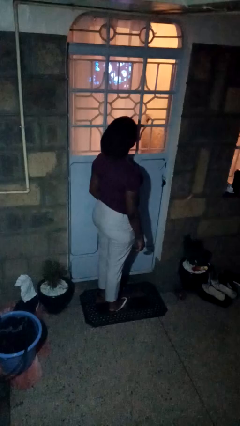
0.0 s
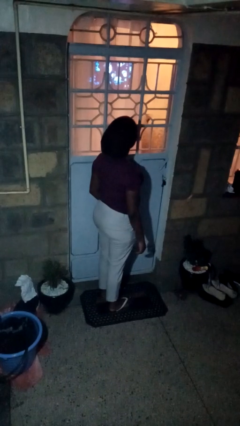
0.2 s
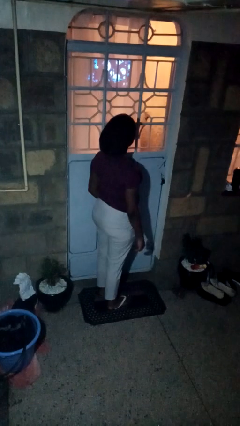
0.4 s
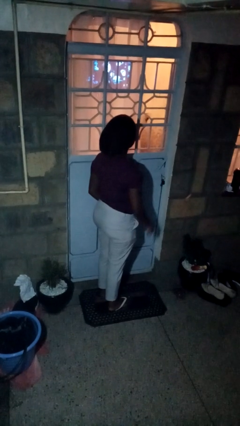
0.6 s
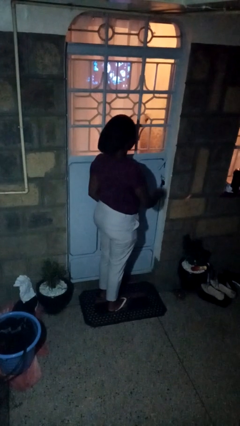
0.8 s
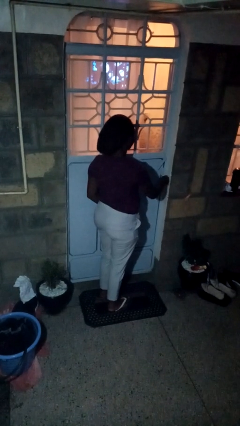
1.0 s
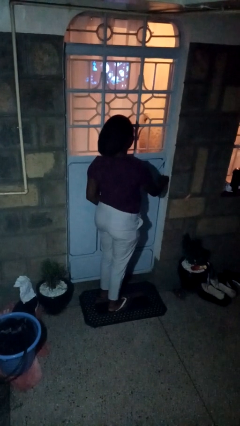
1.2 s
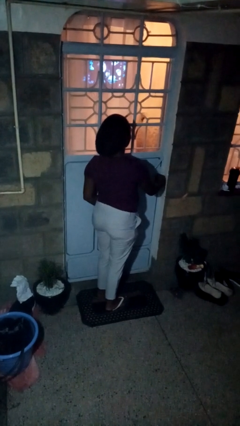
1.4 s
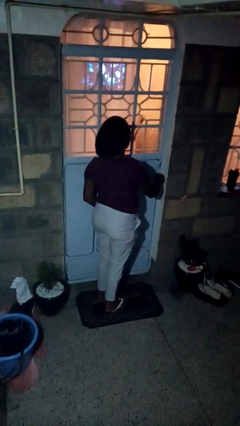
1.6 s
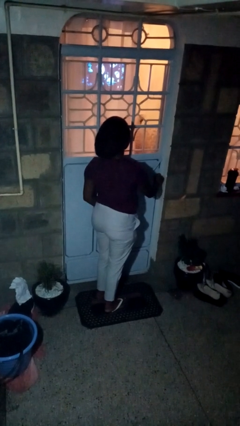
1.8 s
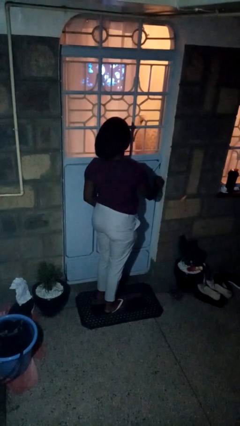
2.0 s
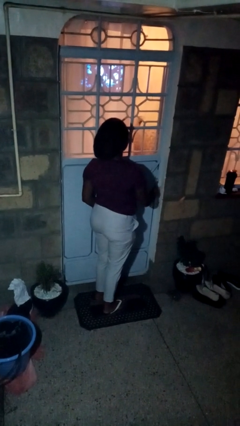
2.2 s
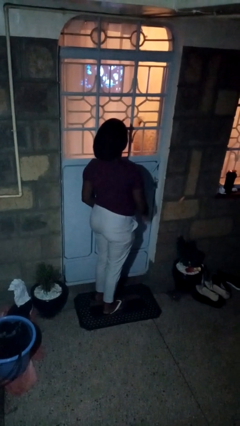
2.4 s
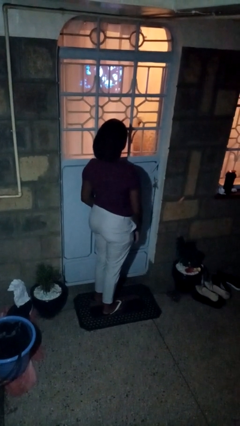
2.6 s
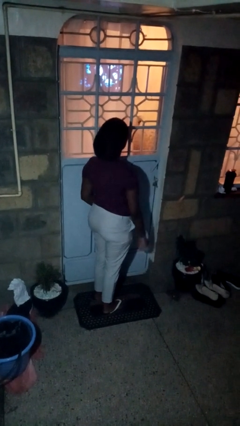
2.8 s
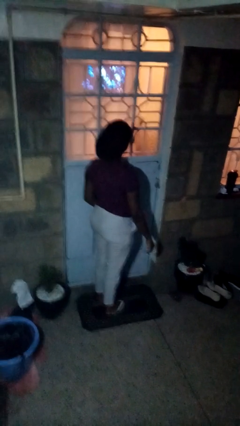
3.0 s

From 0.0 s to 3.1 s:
person unlocks door with keys

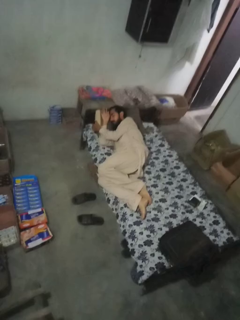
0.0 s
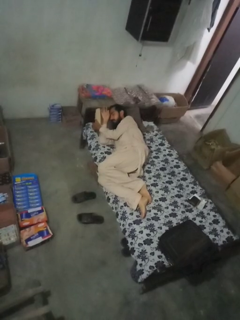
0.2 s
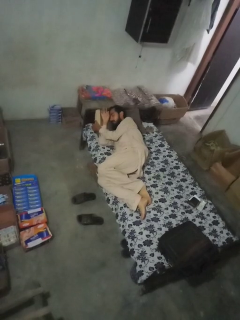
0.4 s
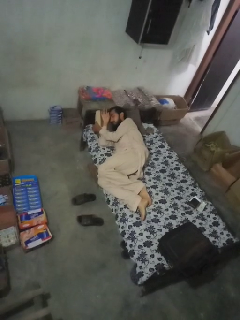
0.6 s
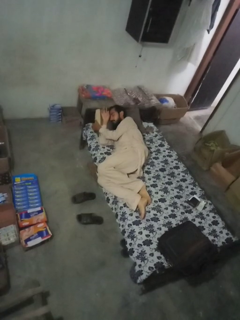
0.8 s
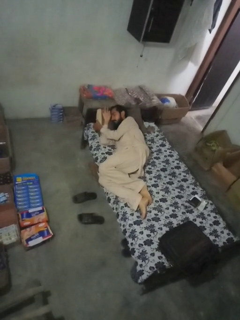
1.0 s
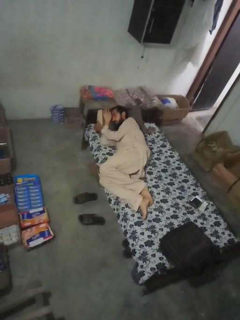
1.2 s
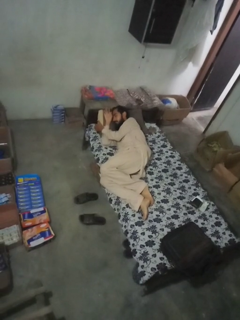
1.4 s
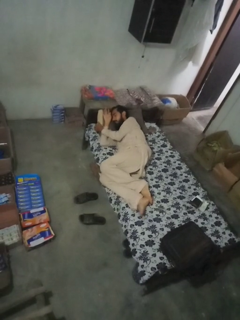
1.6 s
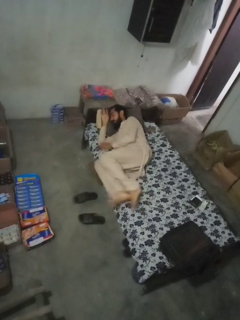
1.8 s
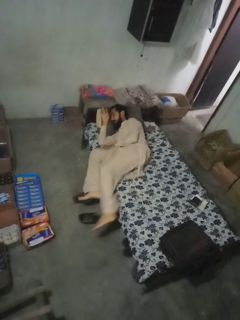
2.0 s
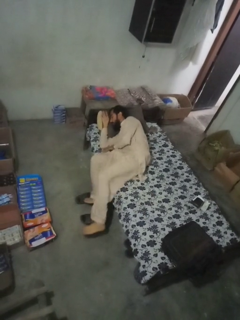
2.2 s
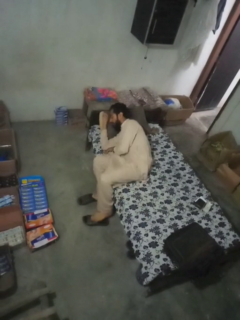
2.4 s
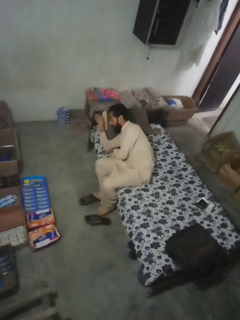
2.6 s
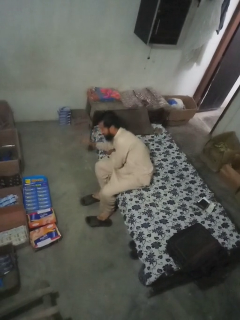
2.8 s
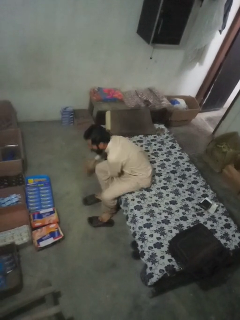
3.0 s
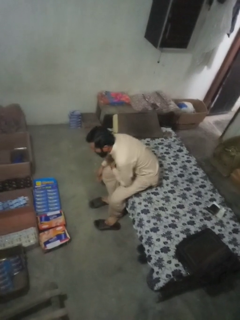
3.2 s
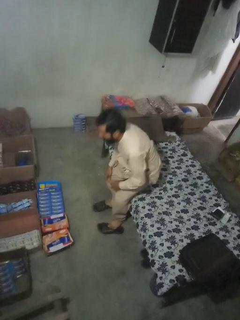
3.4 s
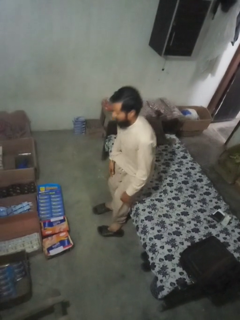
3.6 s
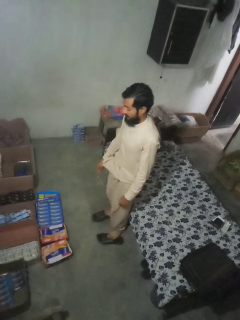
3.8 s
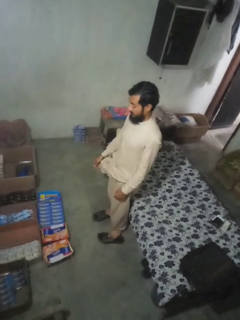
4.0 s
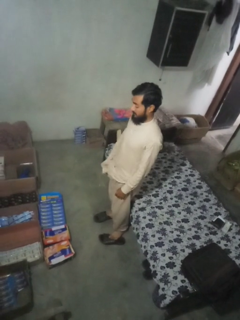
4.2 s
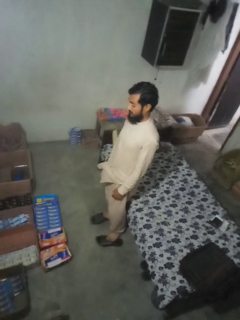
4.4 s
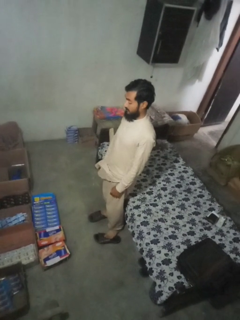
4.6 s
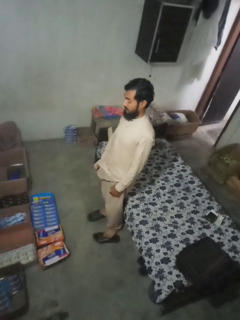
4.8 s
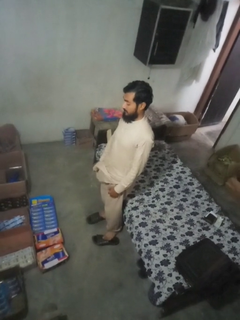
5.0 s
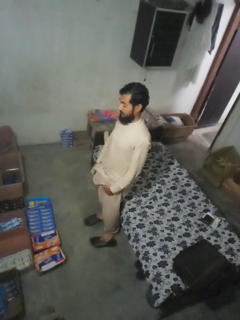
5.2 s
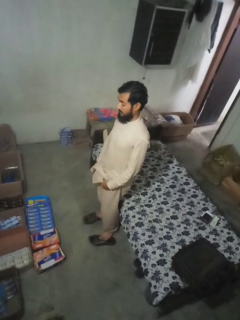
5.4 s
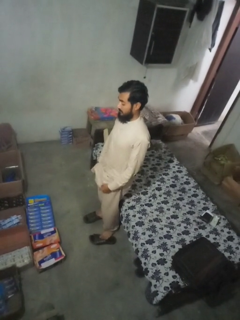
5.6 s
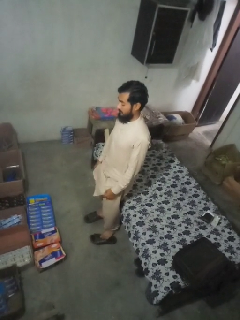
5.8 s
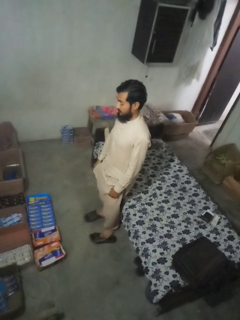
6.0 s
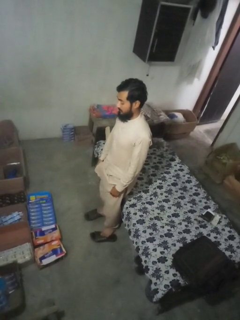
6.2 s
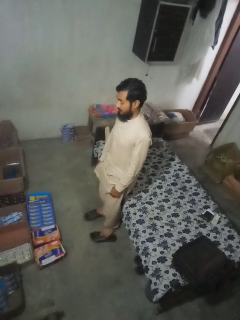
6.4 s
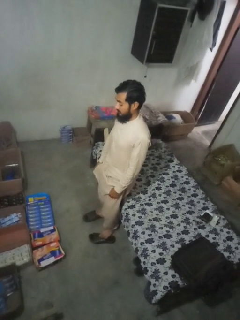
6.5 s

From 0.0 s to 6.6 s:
person stands up

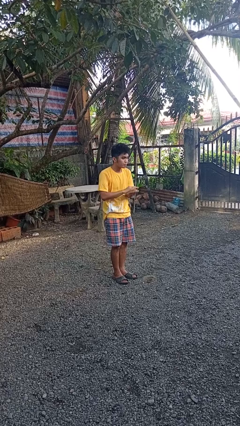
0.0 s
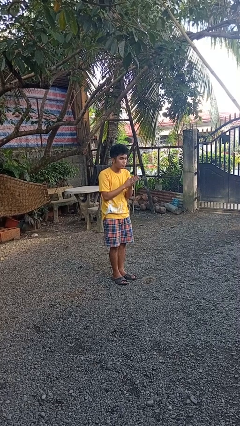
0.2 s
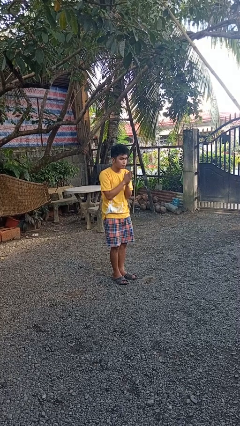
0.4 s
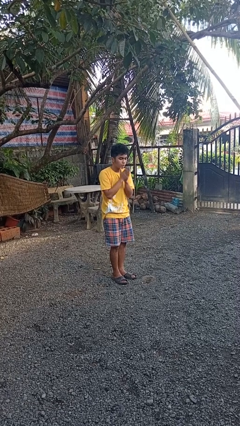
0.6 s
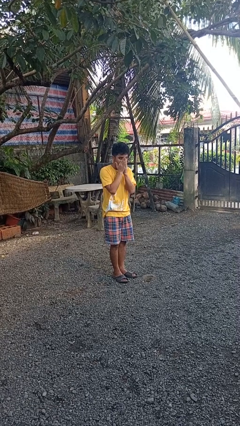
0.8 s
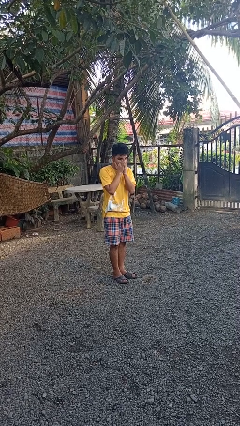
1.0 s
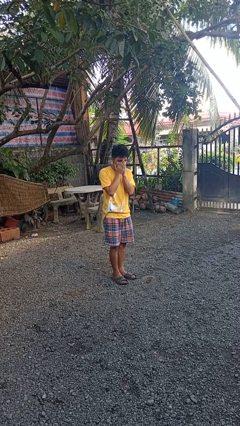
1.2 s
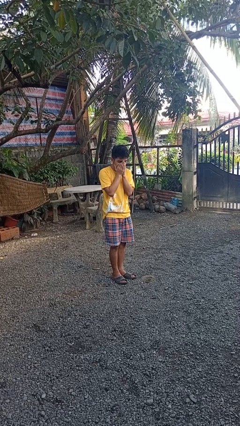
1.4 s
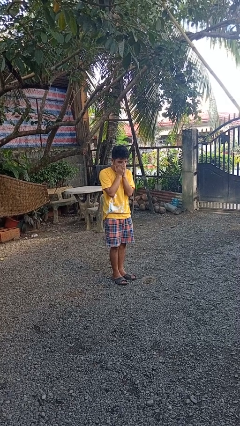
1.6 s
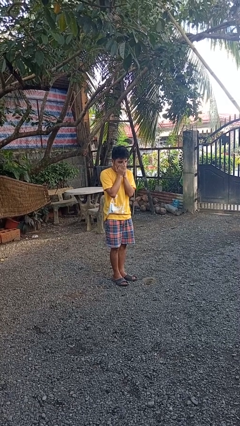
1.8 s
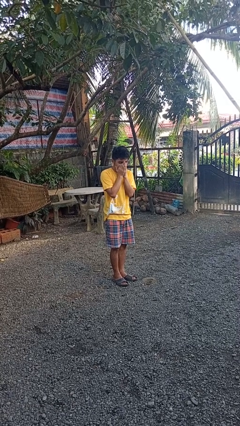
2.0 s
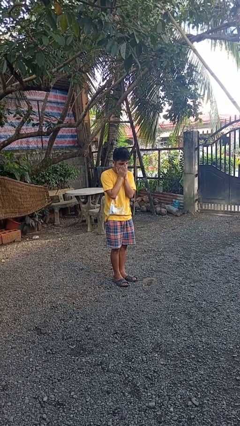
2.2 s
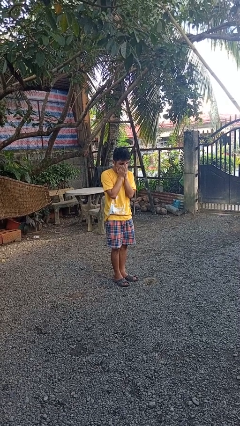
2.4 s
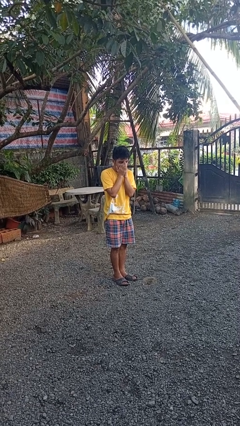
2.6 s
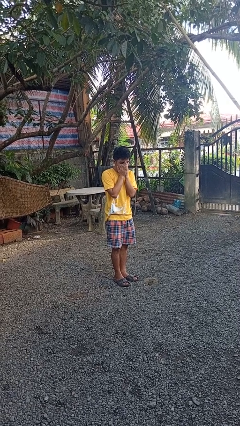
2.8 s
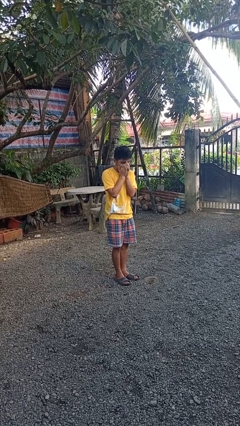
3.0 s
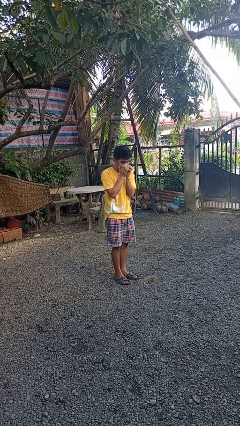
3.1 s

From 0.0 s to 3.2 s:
person blows into hands

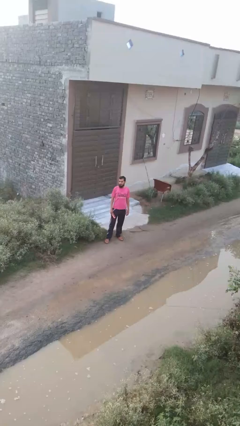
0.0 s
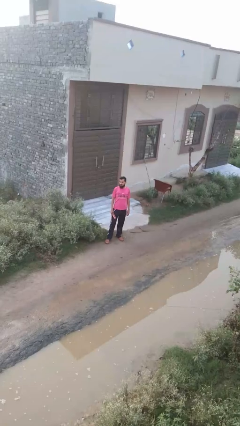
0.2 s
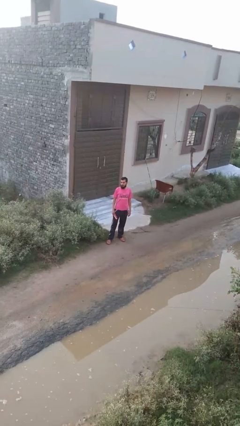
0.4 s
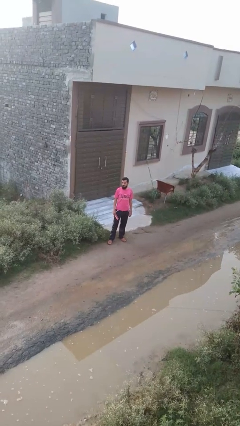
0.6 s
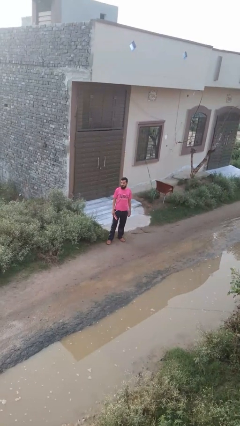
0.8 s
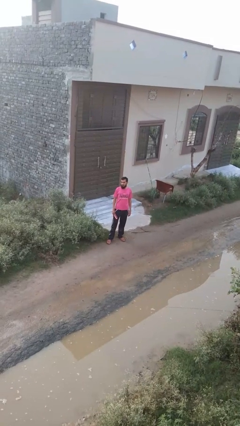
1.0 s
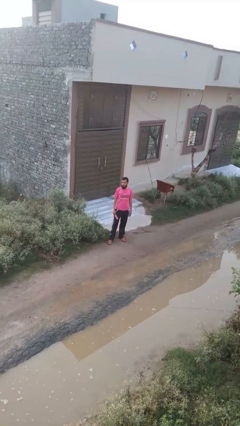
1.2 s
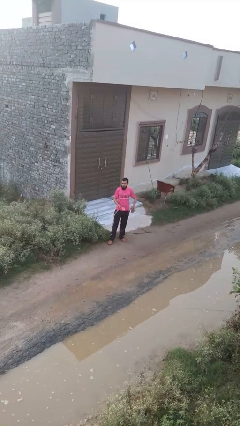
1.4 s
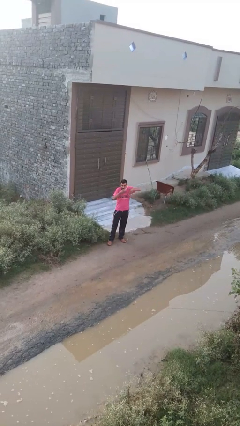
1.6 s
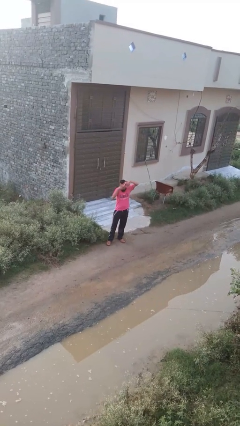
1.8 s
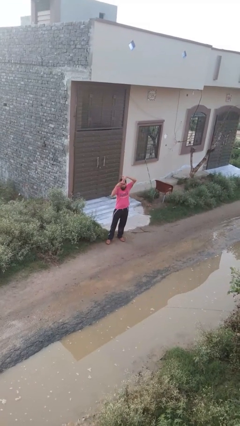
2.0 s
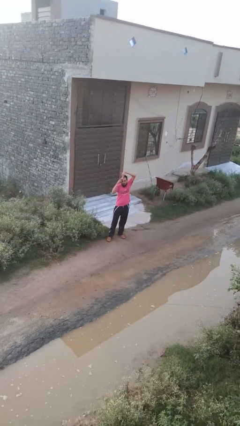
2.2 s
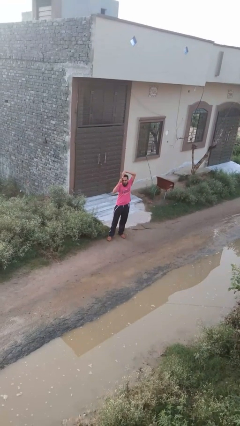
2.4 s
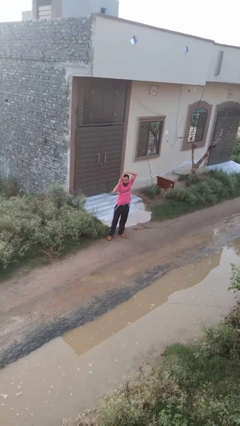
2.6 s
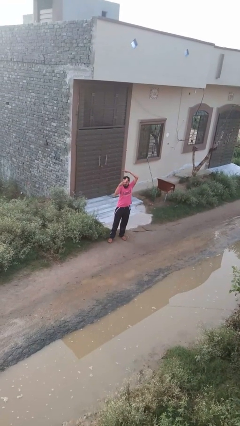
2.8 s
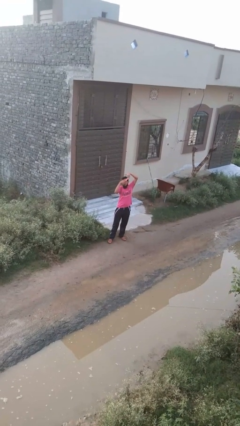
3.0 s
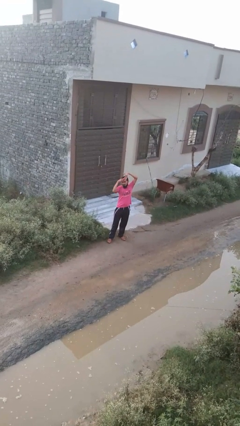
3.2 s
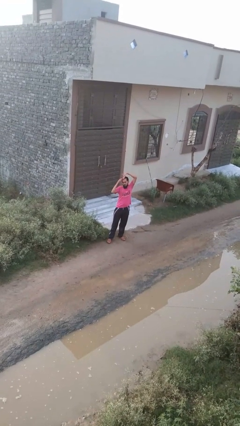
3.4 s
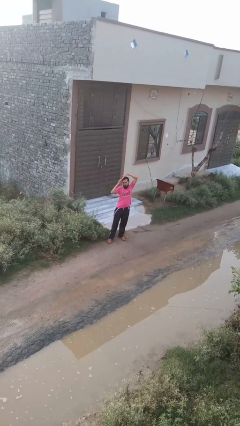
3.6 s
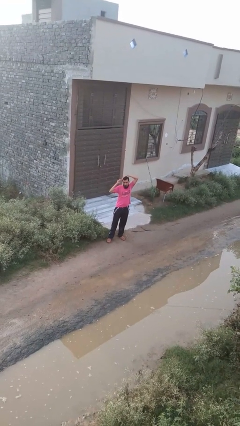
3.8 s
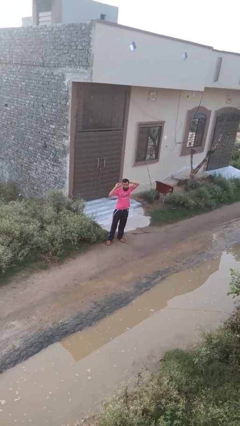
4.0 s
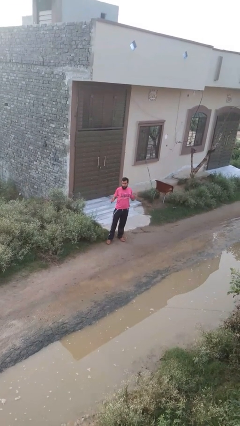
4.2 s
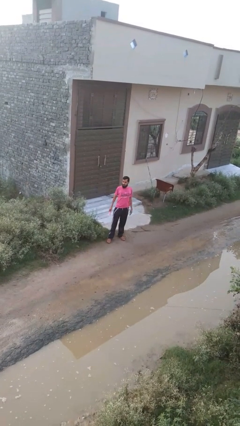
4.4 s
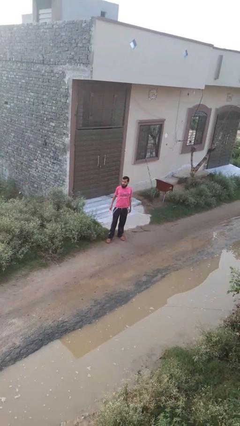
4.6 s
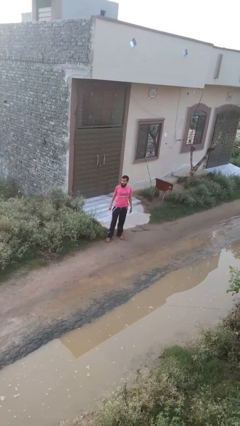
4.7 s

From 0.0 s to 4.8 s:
person brushes hair

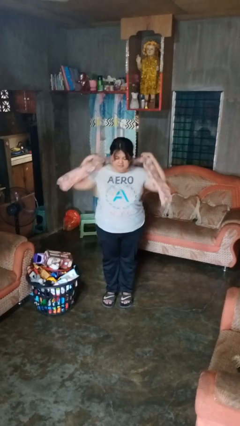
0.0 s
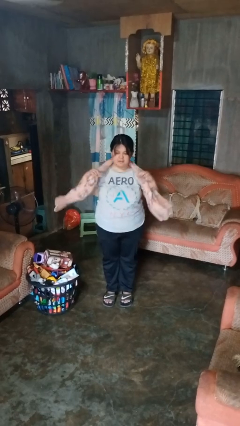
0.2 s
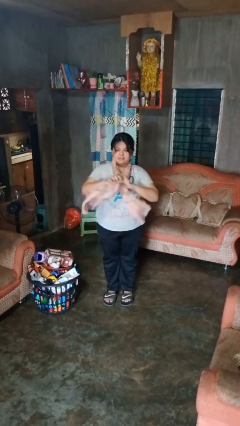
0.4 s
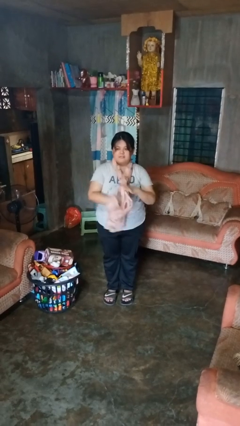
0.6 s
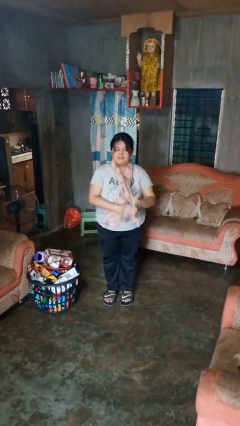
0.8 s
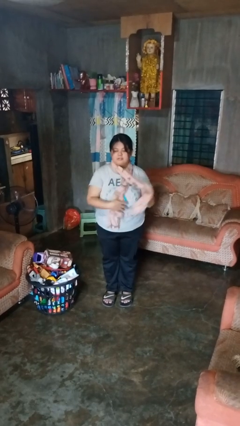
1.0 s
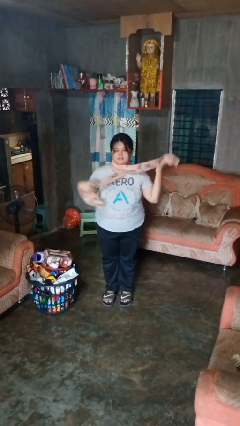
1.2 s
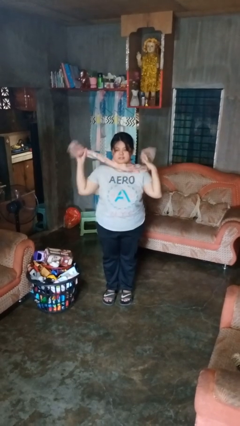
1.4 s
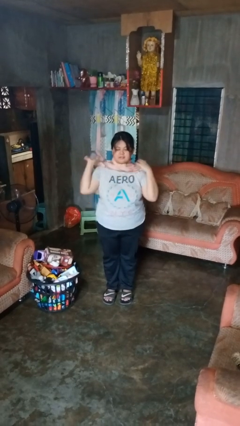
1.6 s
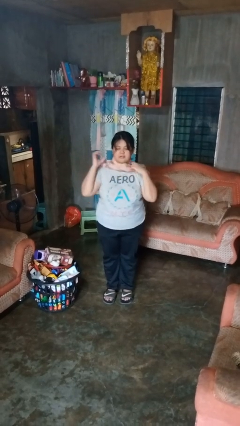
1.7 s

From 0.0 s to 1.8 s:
person puts on scarf
